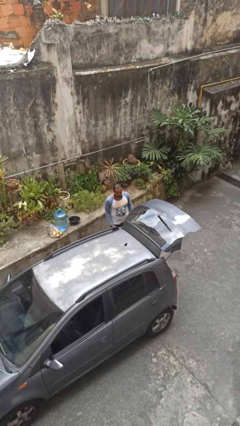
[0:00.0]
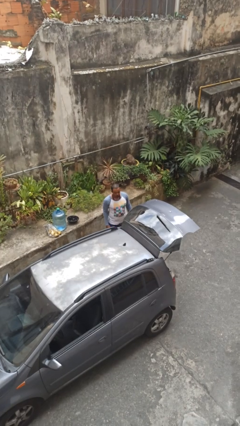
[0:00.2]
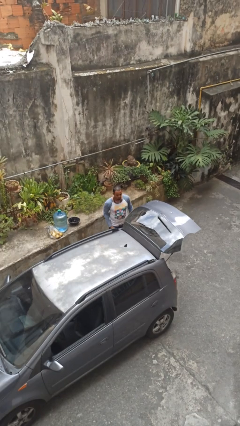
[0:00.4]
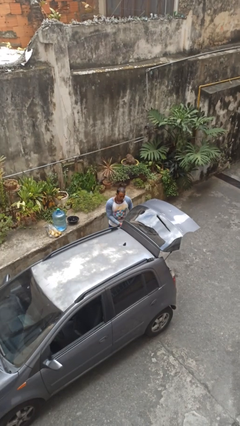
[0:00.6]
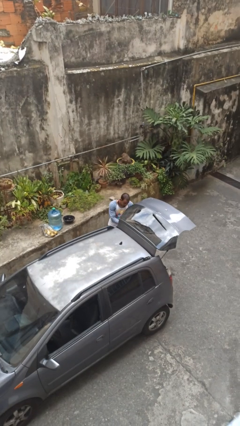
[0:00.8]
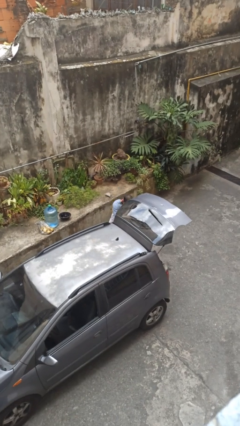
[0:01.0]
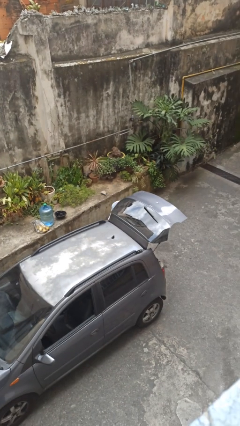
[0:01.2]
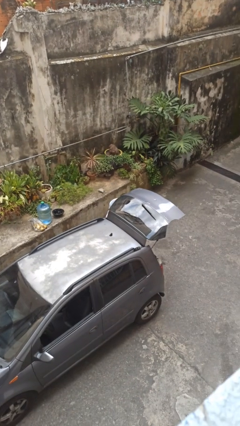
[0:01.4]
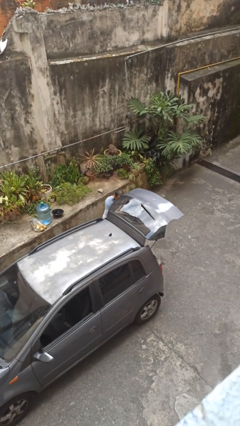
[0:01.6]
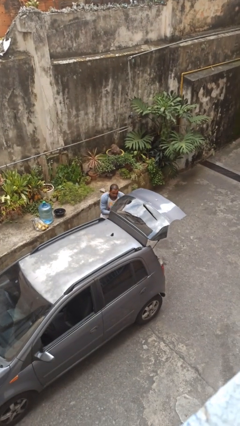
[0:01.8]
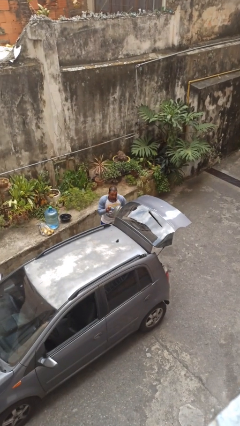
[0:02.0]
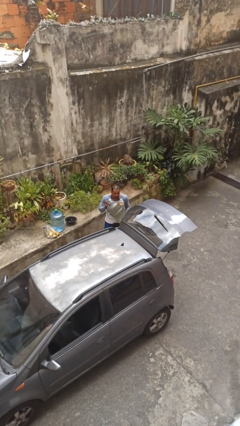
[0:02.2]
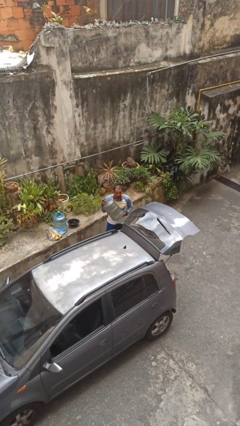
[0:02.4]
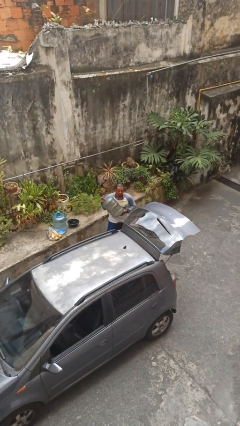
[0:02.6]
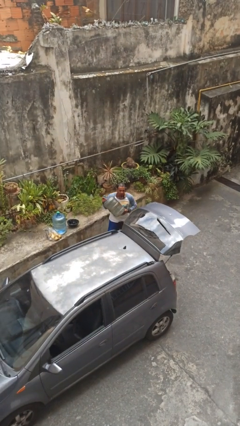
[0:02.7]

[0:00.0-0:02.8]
person unloads car

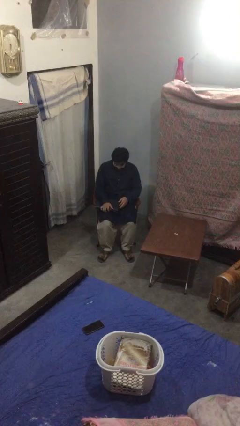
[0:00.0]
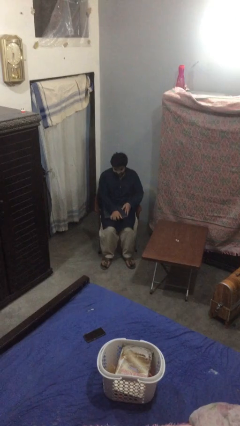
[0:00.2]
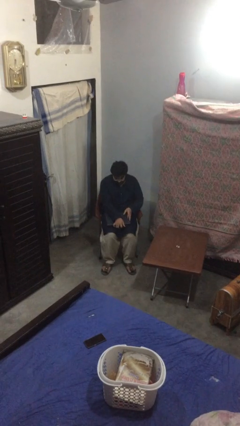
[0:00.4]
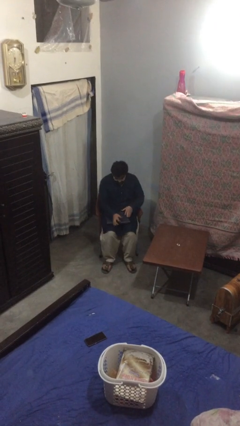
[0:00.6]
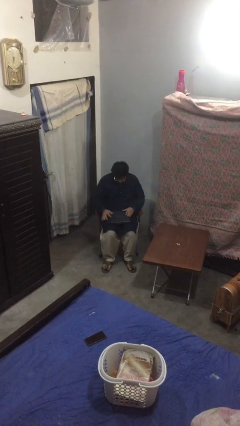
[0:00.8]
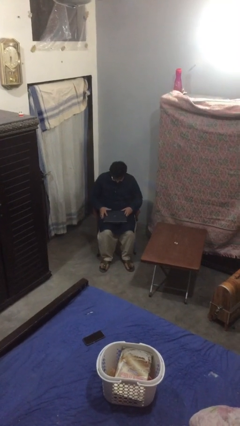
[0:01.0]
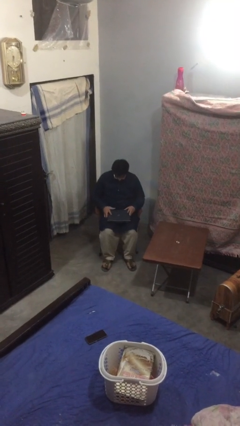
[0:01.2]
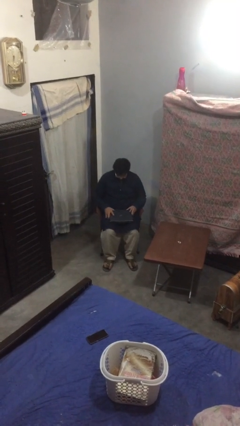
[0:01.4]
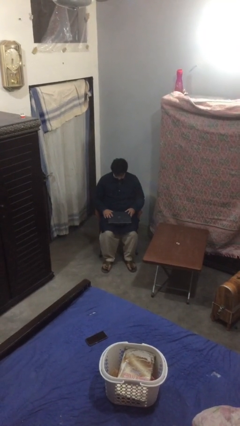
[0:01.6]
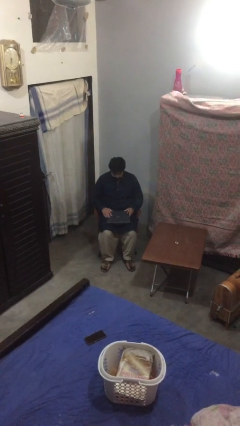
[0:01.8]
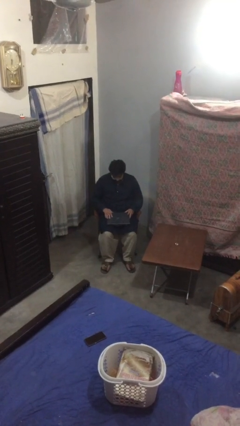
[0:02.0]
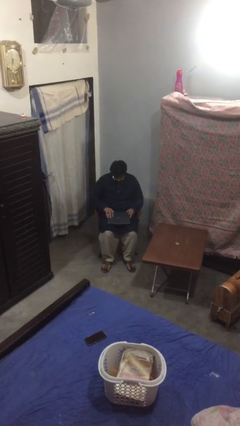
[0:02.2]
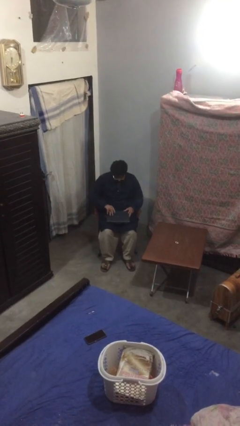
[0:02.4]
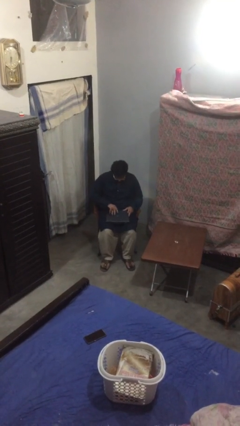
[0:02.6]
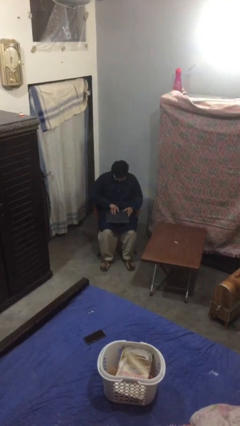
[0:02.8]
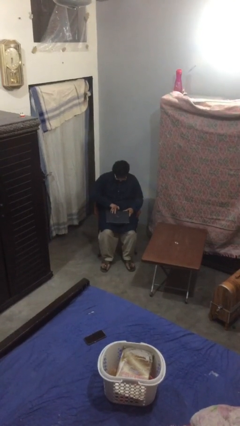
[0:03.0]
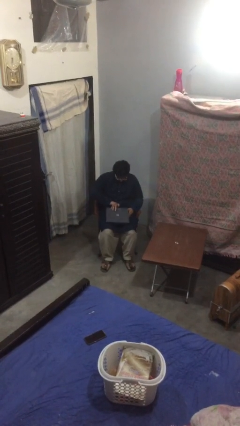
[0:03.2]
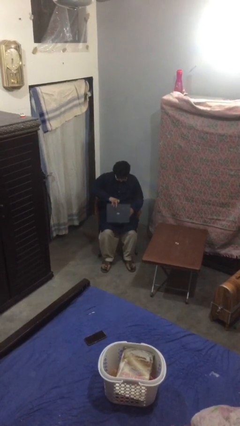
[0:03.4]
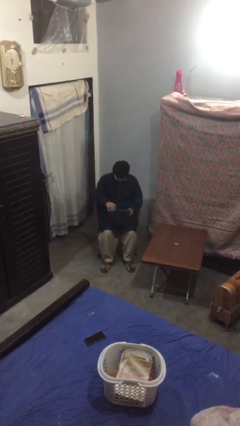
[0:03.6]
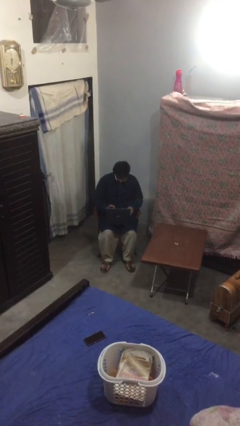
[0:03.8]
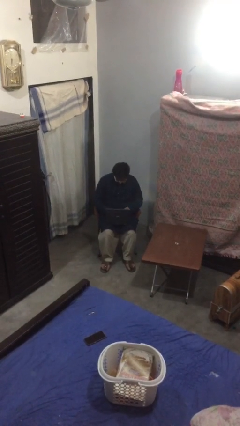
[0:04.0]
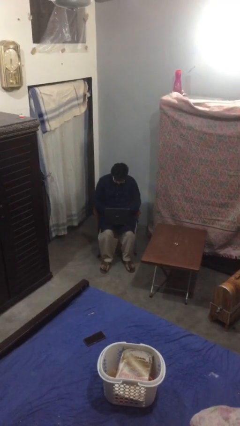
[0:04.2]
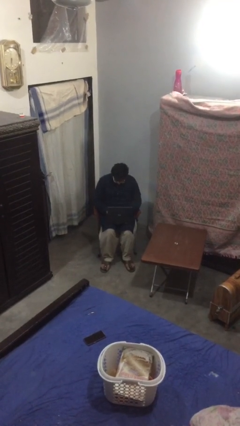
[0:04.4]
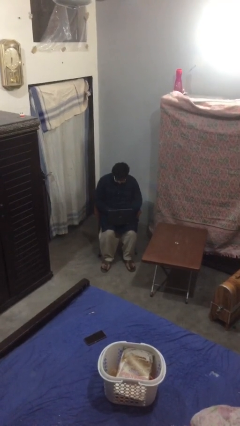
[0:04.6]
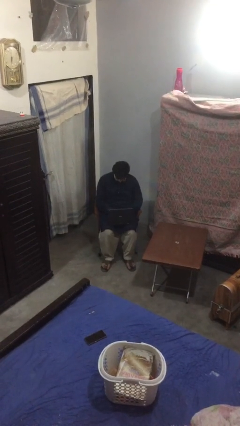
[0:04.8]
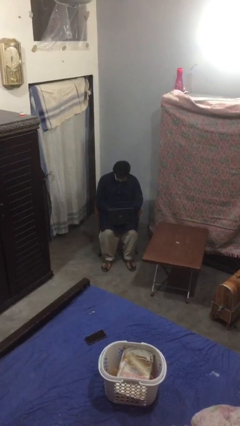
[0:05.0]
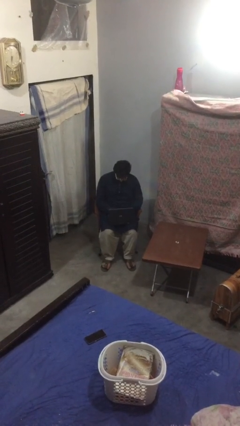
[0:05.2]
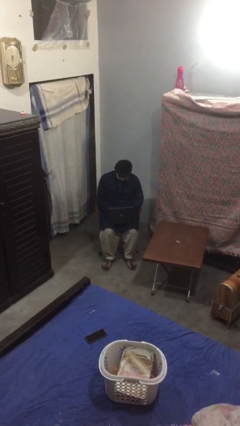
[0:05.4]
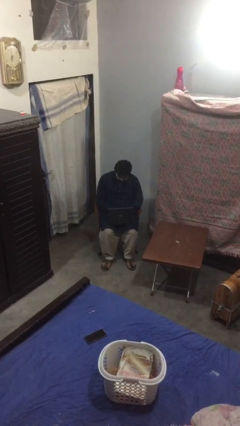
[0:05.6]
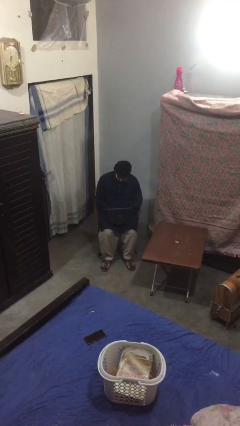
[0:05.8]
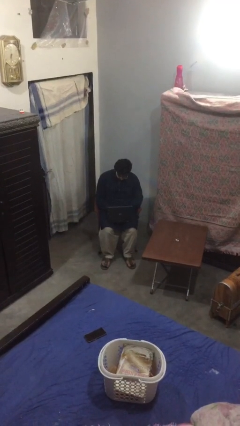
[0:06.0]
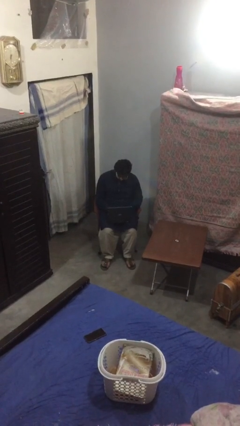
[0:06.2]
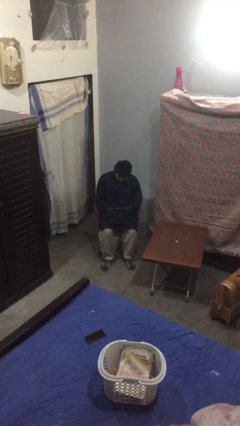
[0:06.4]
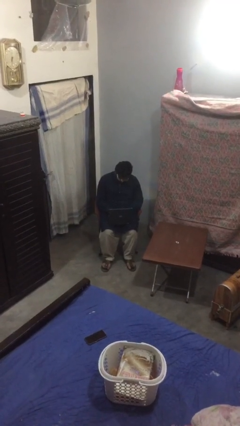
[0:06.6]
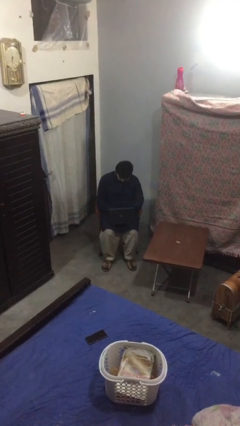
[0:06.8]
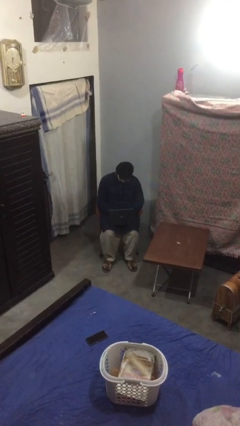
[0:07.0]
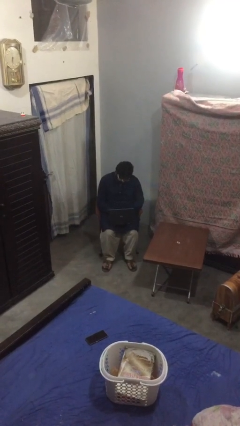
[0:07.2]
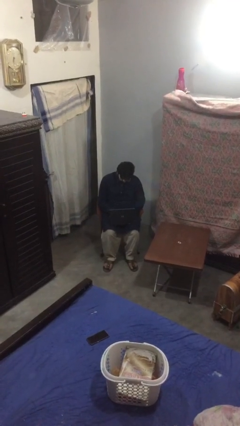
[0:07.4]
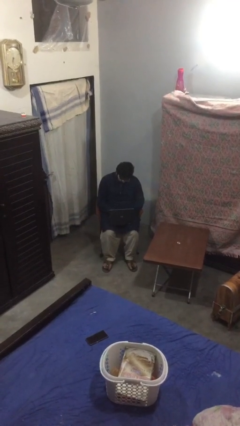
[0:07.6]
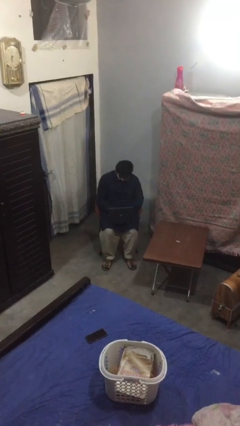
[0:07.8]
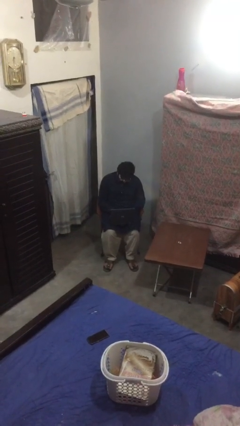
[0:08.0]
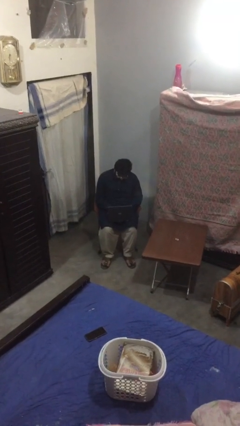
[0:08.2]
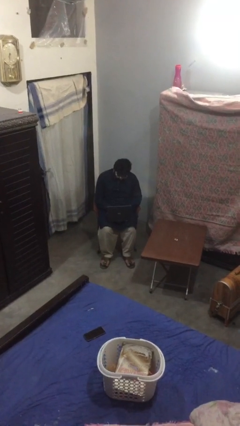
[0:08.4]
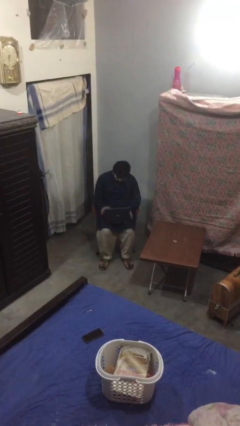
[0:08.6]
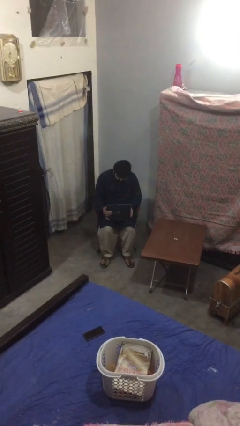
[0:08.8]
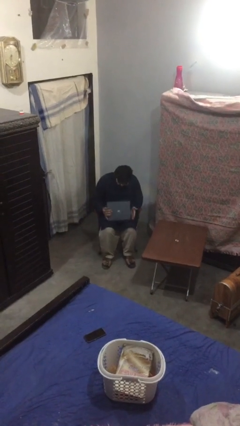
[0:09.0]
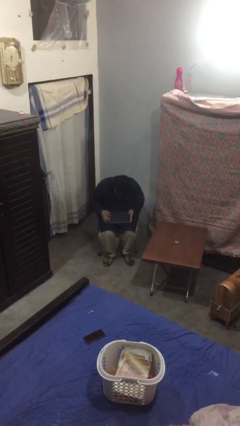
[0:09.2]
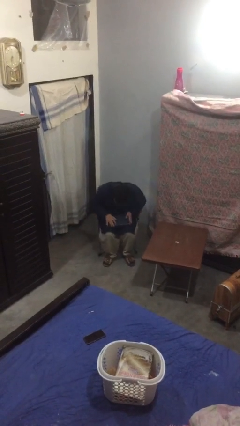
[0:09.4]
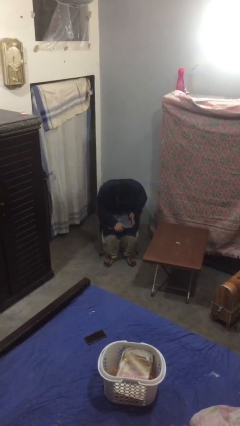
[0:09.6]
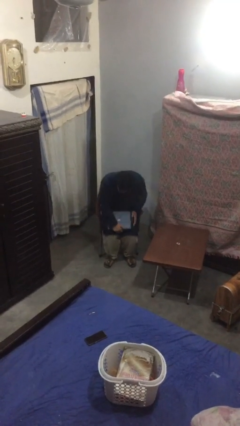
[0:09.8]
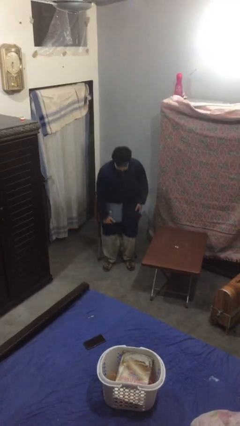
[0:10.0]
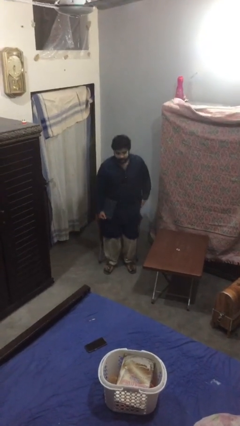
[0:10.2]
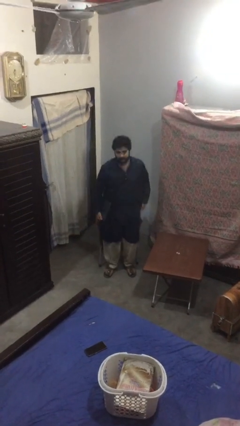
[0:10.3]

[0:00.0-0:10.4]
person interacts with laptop

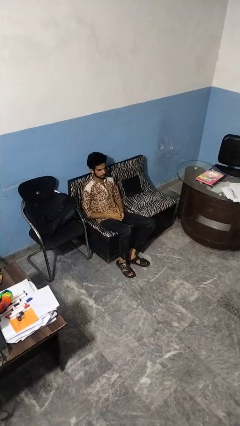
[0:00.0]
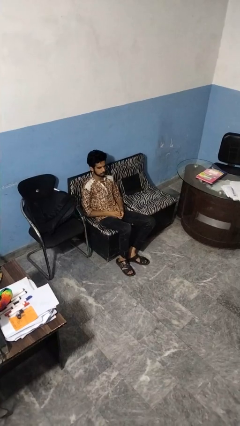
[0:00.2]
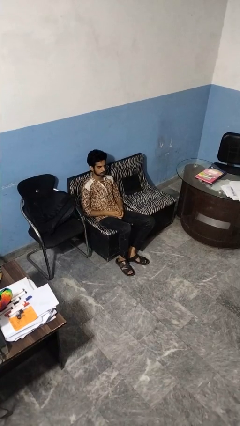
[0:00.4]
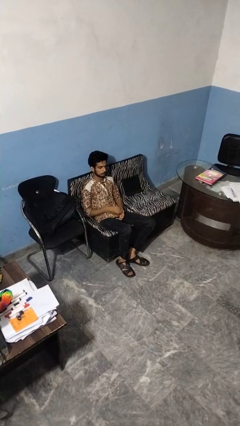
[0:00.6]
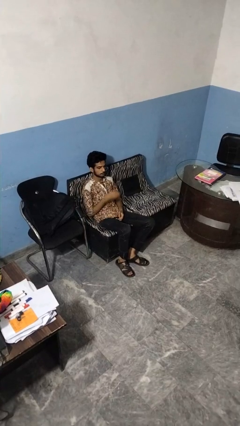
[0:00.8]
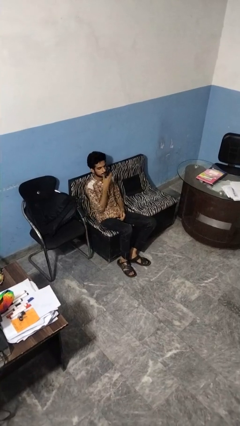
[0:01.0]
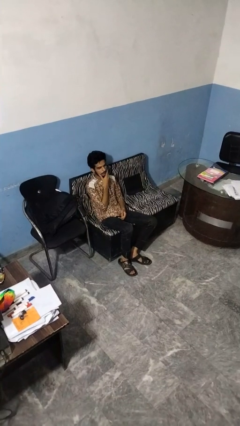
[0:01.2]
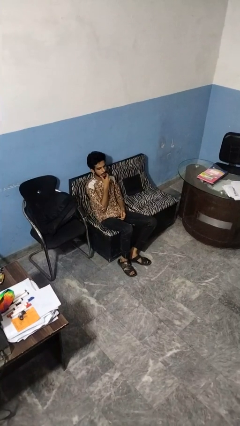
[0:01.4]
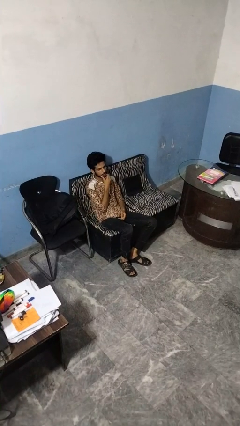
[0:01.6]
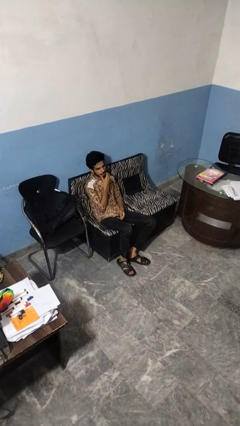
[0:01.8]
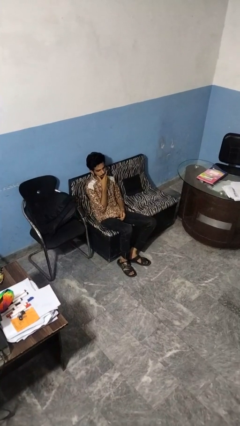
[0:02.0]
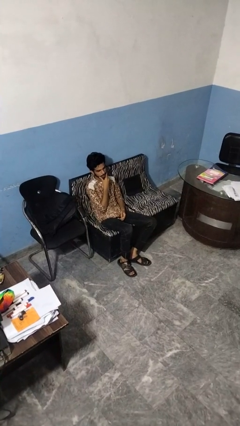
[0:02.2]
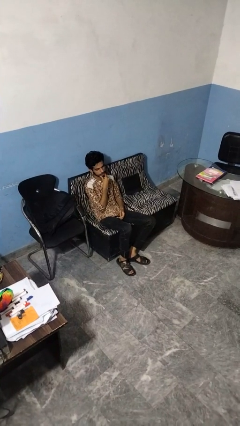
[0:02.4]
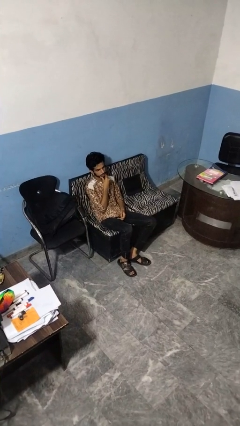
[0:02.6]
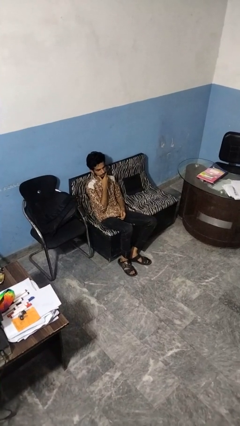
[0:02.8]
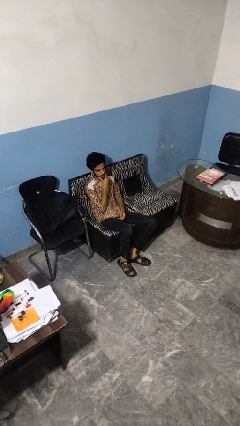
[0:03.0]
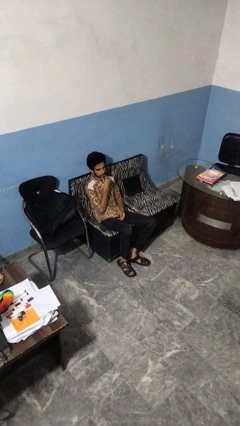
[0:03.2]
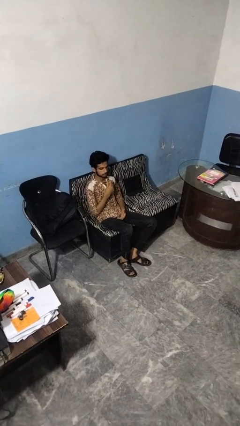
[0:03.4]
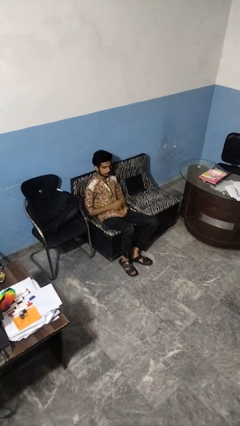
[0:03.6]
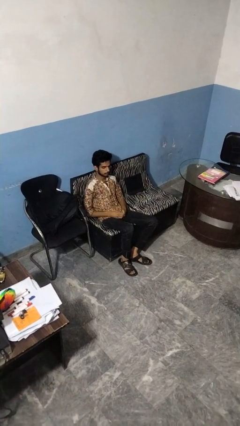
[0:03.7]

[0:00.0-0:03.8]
person strokes chin

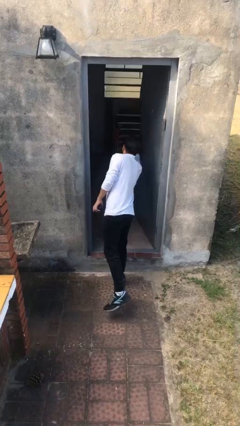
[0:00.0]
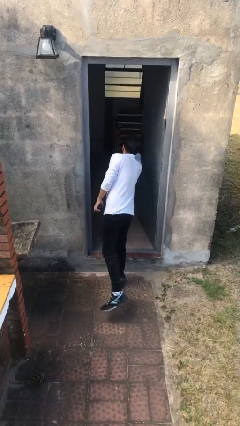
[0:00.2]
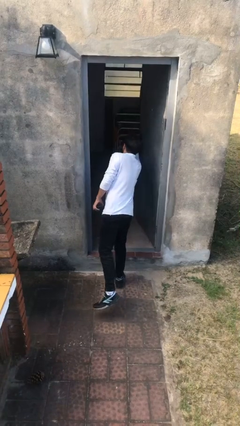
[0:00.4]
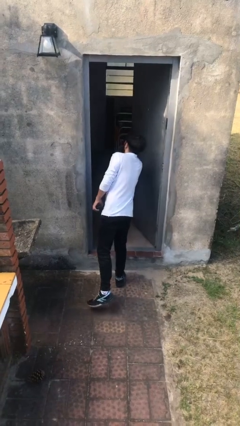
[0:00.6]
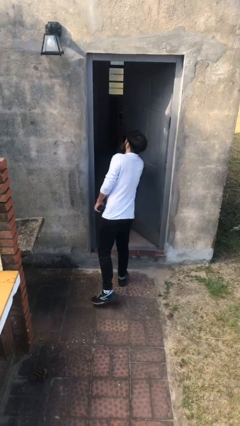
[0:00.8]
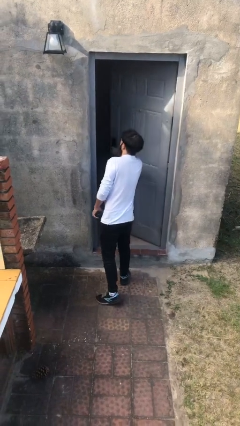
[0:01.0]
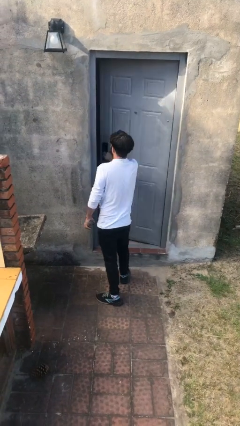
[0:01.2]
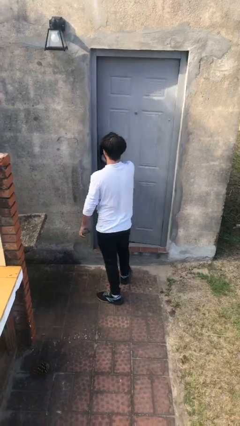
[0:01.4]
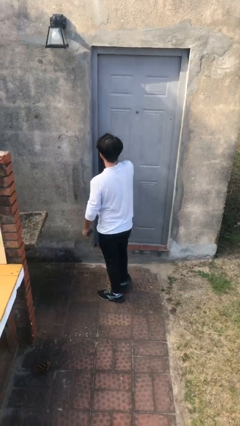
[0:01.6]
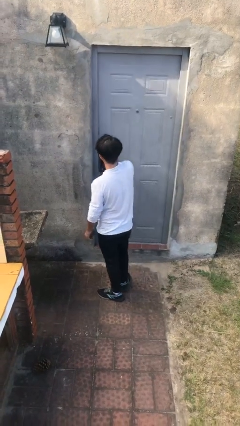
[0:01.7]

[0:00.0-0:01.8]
person closes facility door
